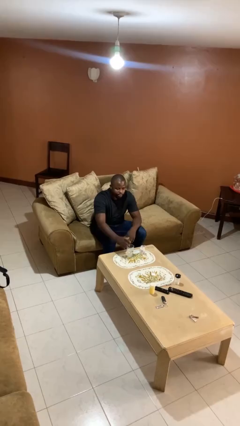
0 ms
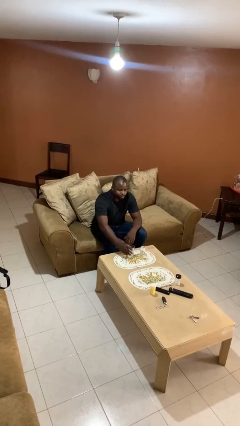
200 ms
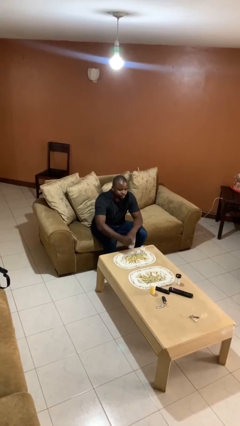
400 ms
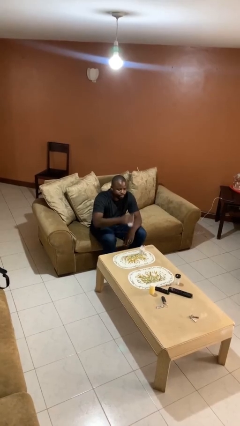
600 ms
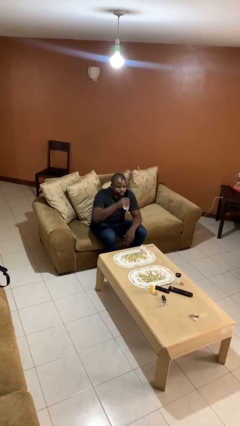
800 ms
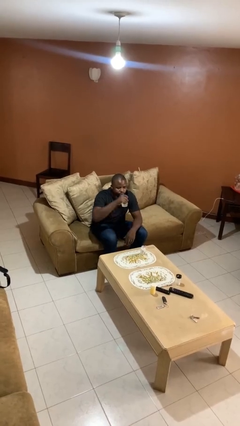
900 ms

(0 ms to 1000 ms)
person drinks from cup

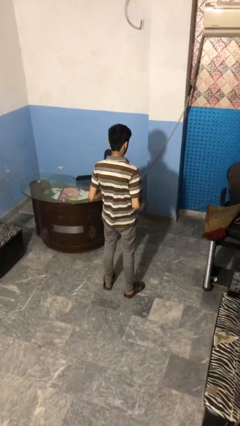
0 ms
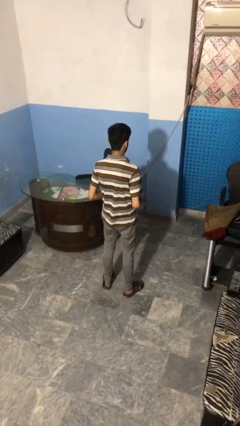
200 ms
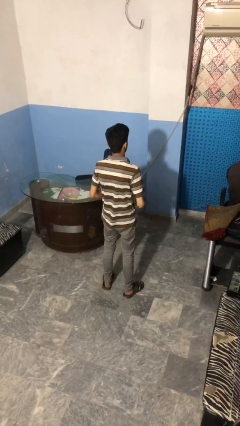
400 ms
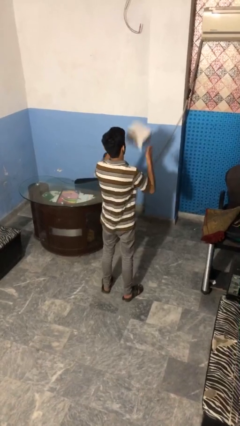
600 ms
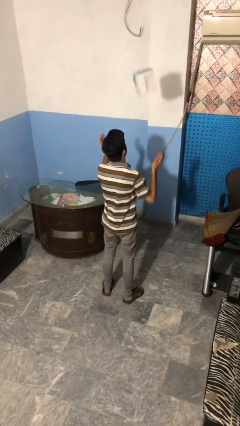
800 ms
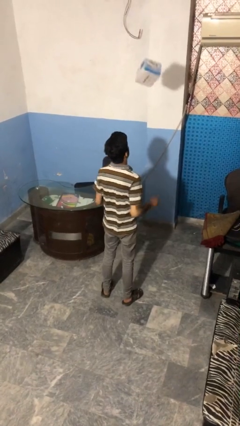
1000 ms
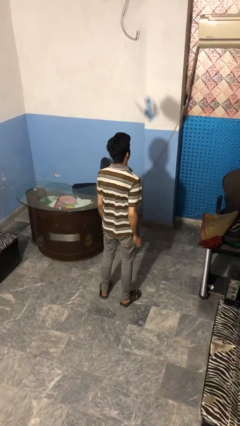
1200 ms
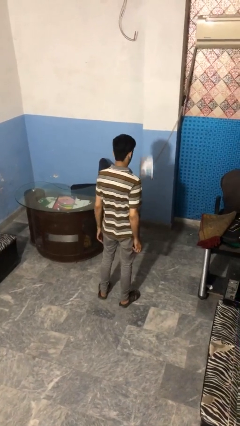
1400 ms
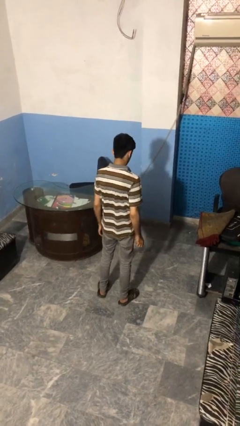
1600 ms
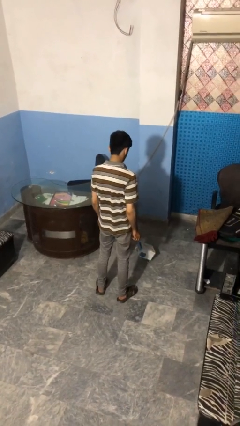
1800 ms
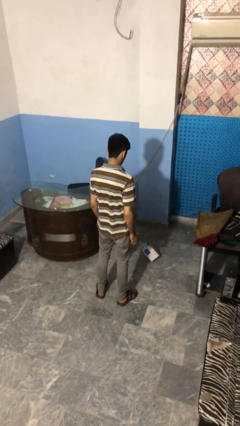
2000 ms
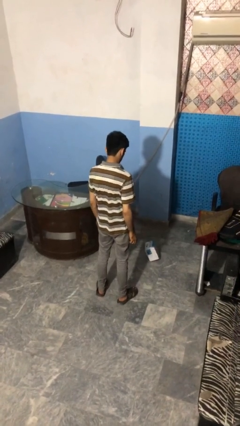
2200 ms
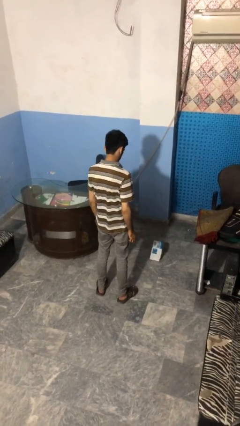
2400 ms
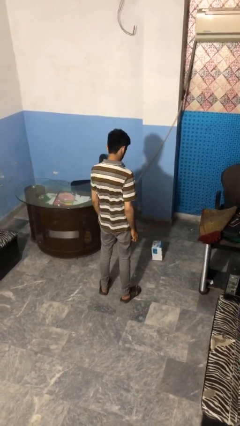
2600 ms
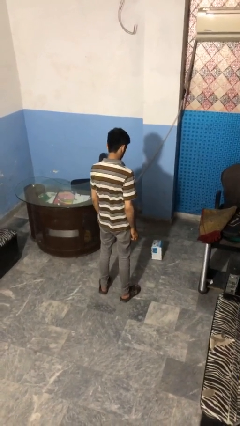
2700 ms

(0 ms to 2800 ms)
person throws object into air

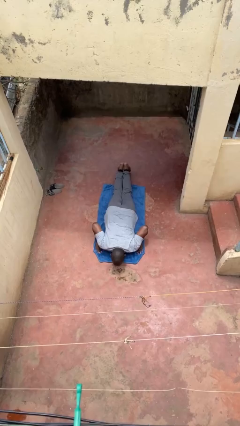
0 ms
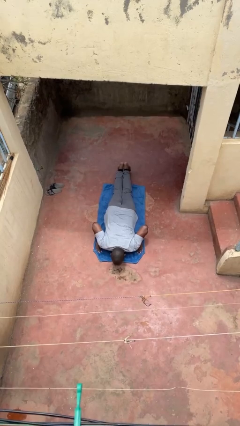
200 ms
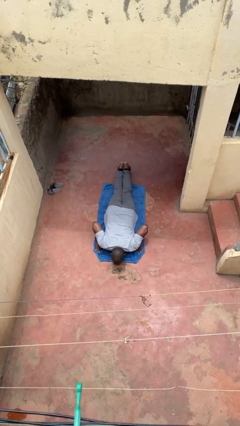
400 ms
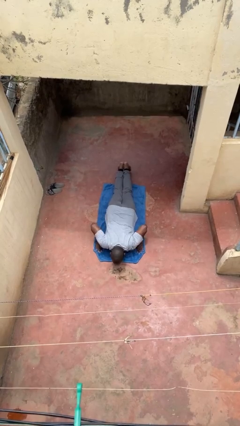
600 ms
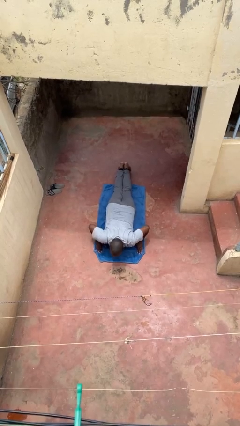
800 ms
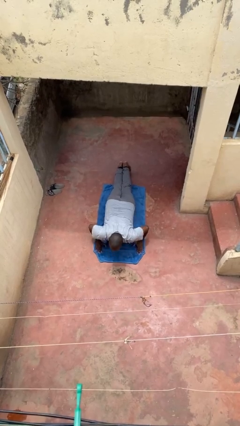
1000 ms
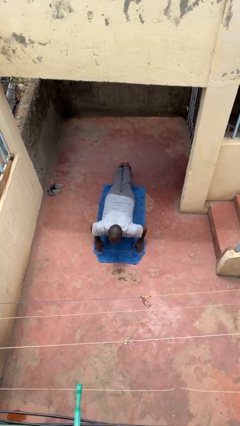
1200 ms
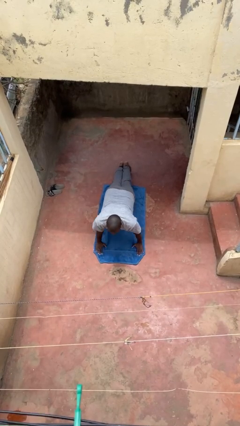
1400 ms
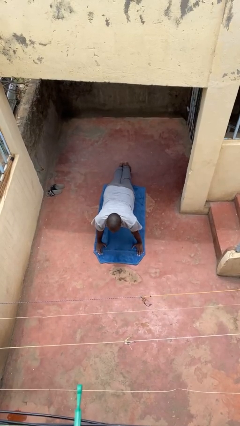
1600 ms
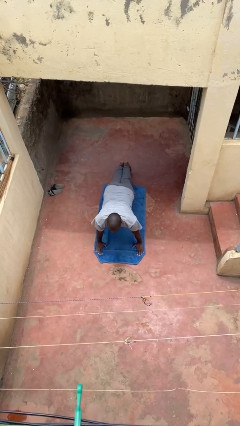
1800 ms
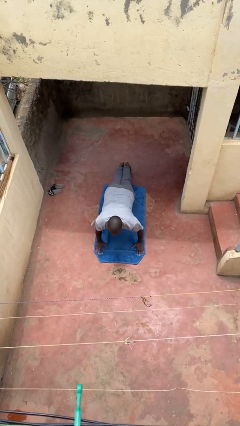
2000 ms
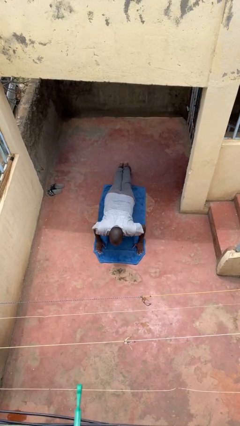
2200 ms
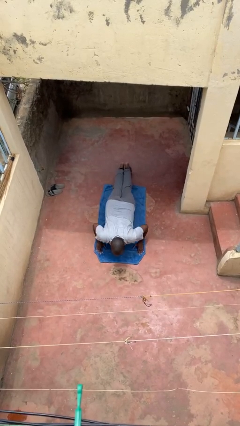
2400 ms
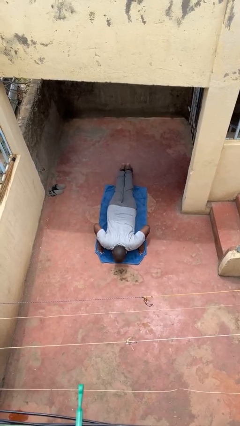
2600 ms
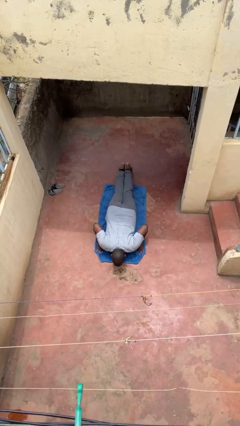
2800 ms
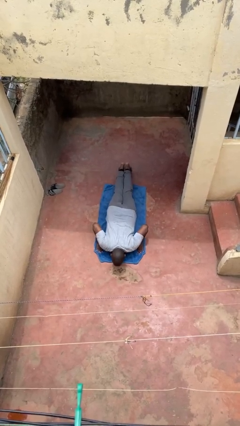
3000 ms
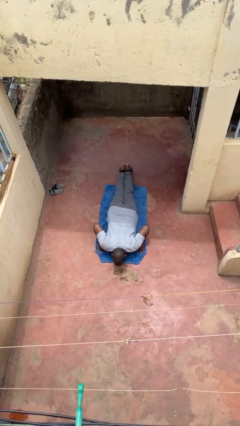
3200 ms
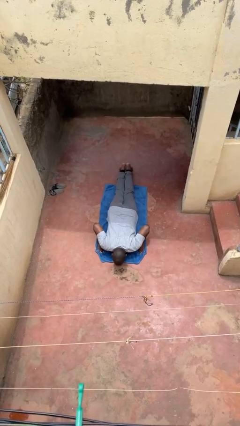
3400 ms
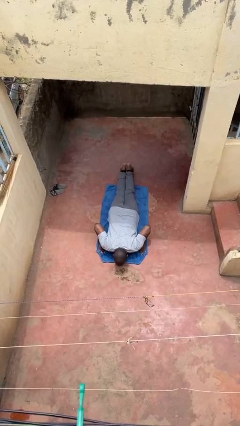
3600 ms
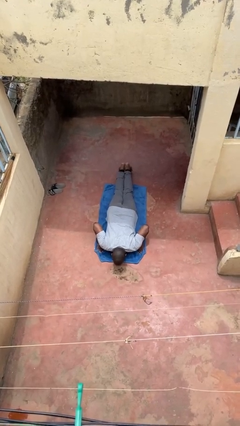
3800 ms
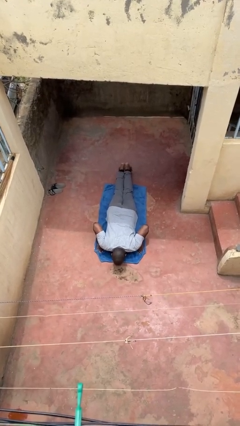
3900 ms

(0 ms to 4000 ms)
person exercises with pushup

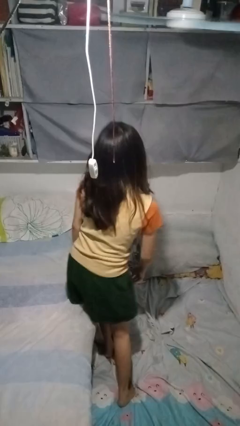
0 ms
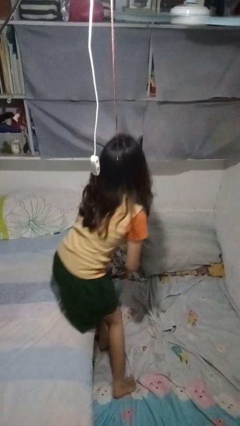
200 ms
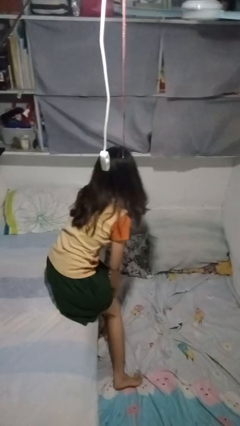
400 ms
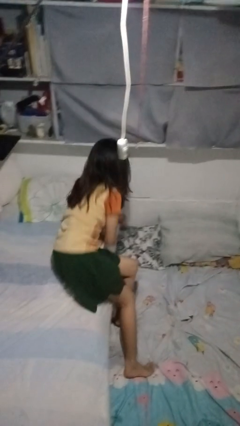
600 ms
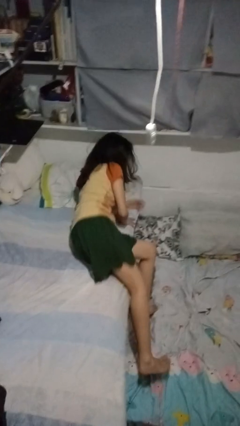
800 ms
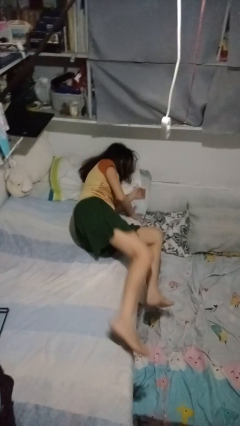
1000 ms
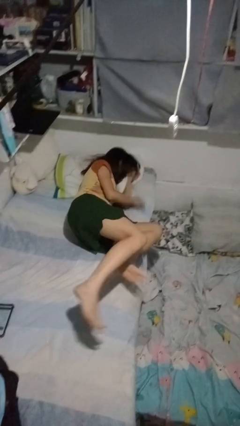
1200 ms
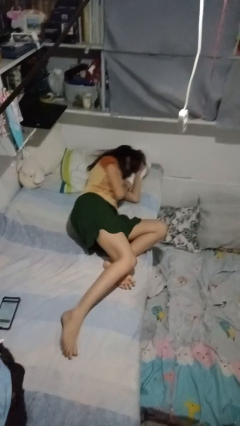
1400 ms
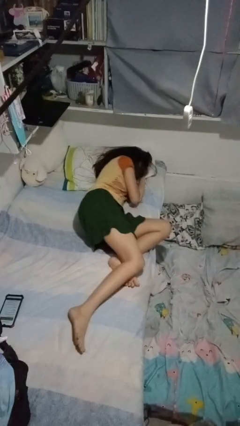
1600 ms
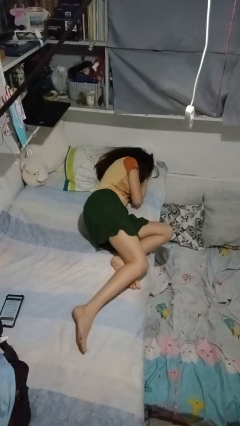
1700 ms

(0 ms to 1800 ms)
person lies down on bed

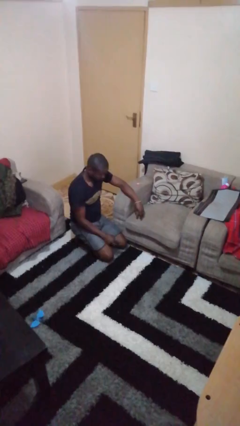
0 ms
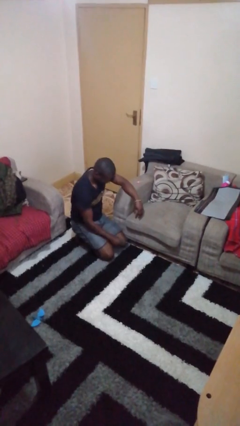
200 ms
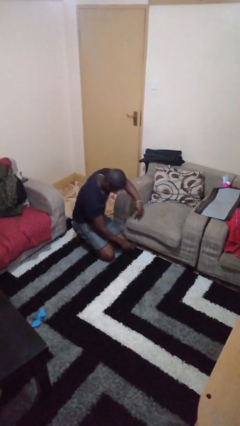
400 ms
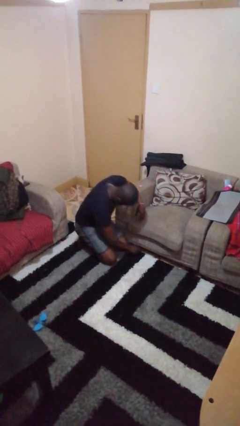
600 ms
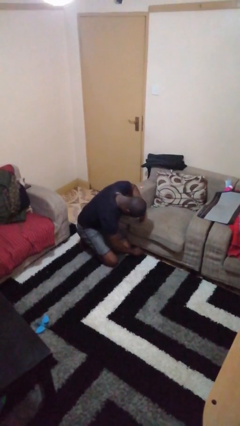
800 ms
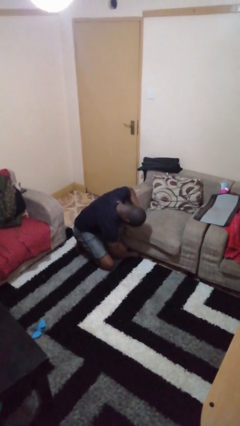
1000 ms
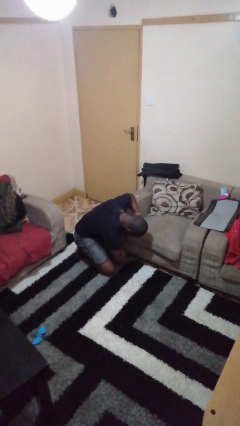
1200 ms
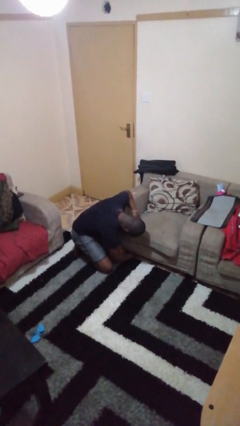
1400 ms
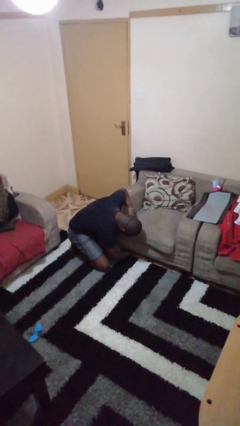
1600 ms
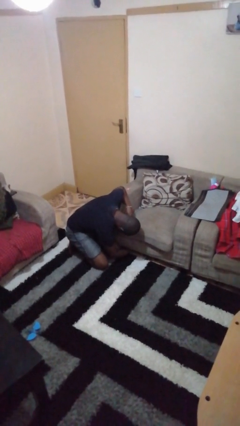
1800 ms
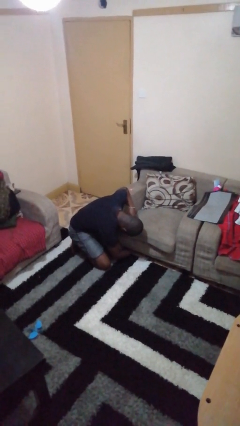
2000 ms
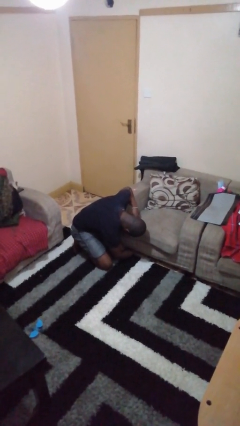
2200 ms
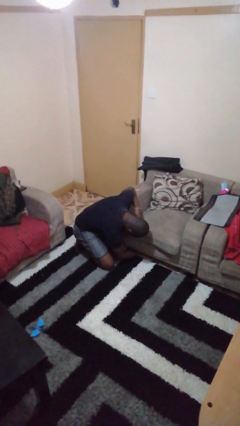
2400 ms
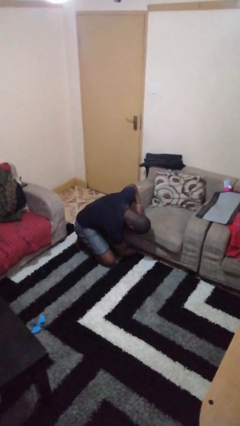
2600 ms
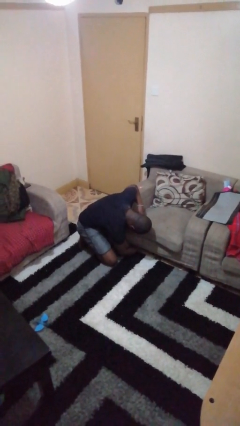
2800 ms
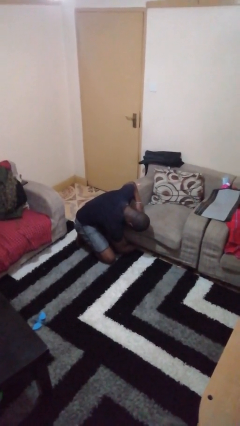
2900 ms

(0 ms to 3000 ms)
person searches under couch

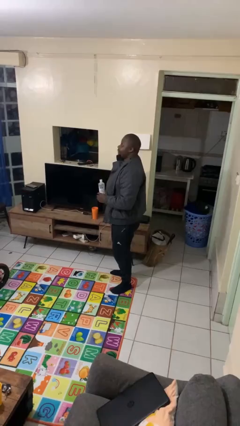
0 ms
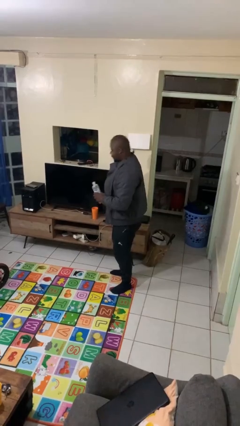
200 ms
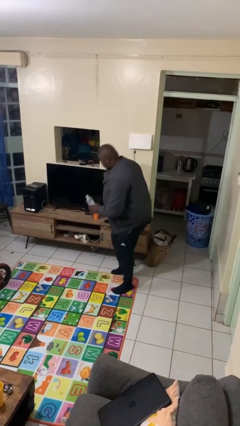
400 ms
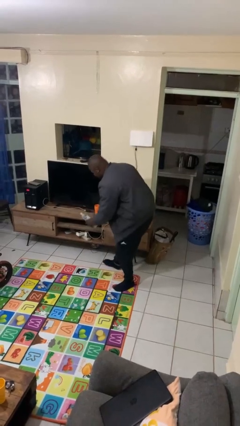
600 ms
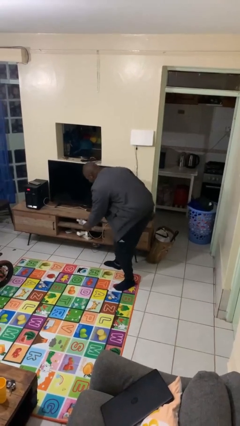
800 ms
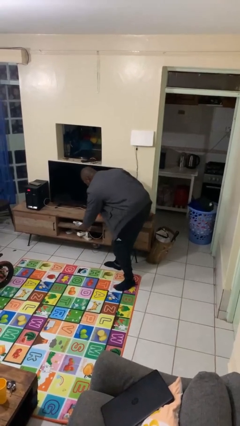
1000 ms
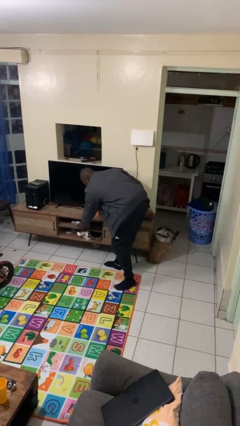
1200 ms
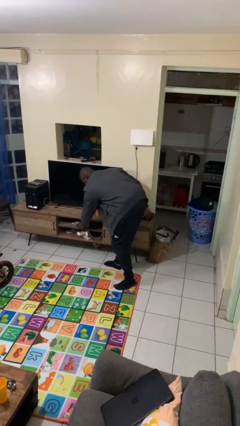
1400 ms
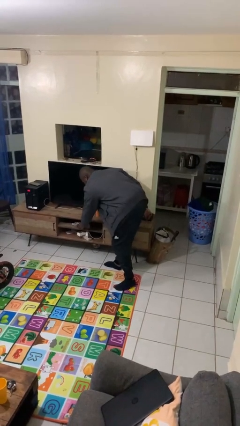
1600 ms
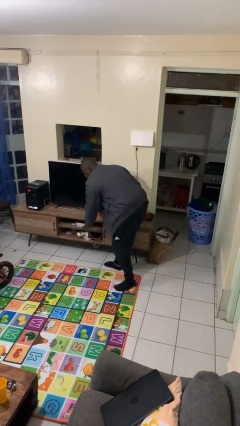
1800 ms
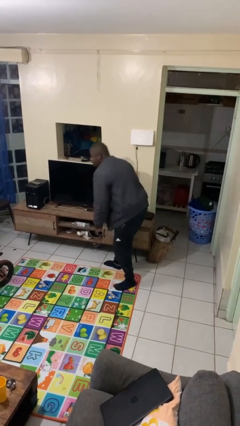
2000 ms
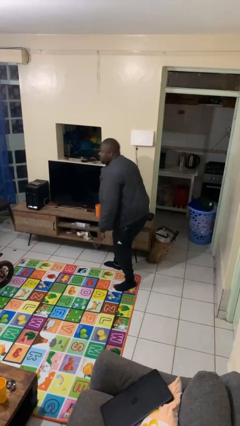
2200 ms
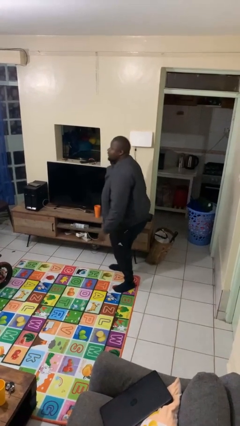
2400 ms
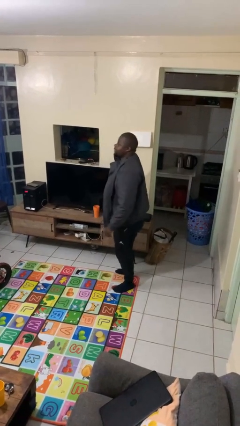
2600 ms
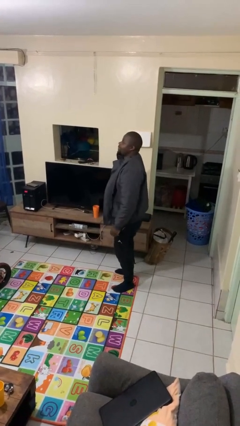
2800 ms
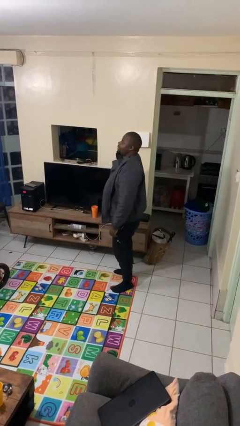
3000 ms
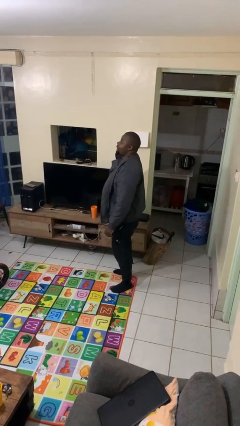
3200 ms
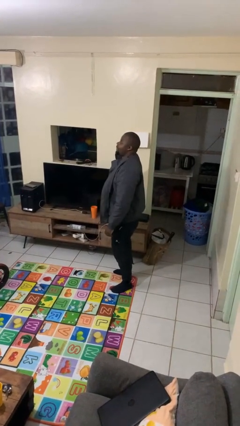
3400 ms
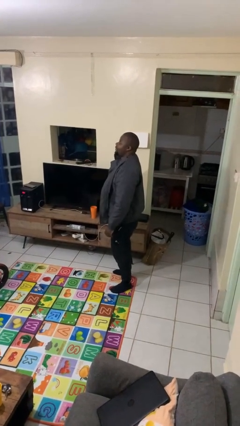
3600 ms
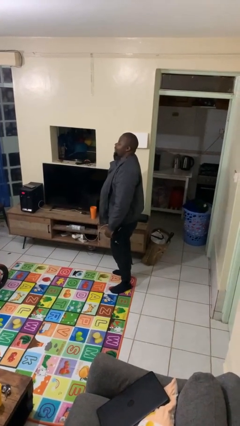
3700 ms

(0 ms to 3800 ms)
person puts down object into cabinet

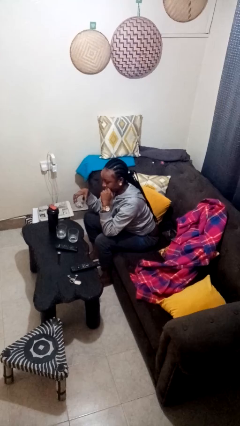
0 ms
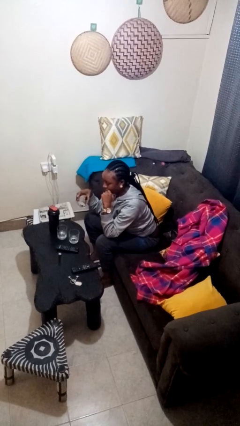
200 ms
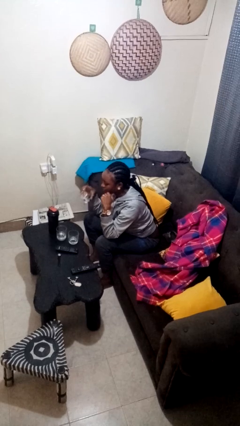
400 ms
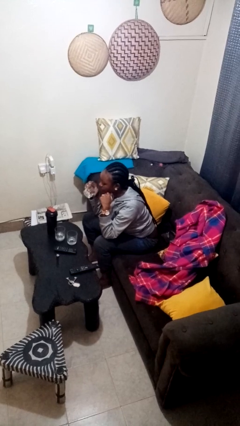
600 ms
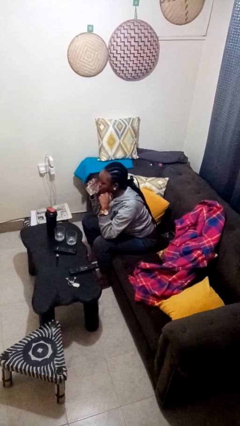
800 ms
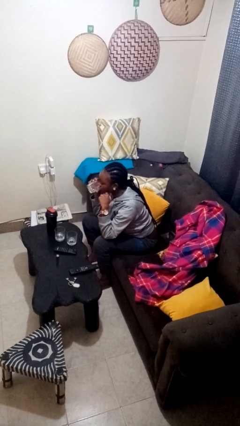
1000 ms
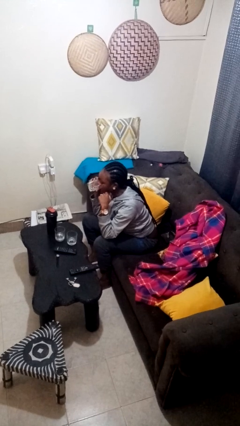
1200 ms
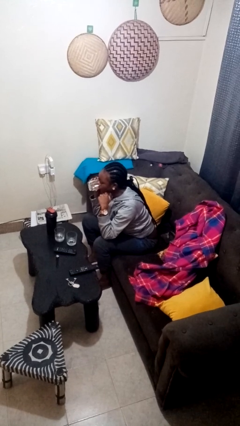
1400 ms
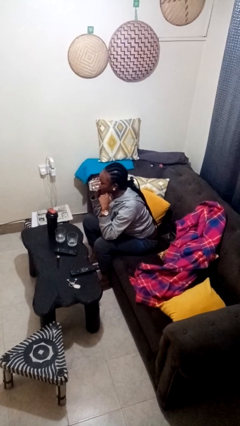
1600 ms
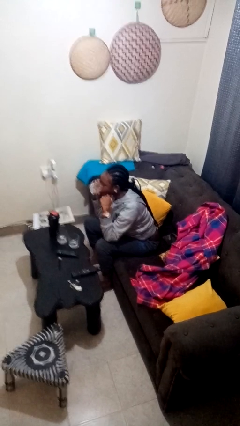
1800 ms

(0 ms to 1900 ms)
person drinks from shotglass
